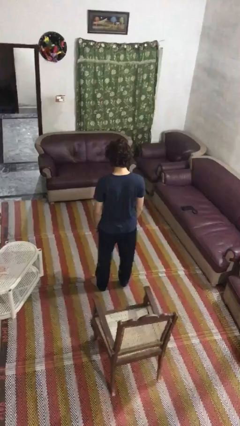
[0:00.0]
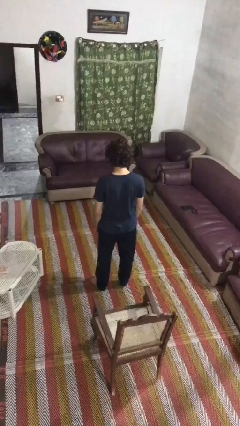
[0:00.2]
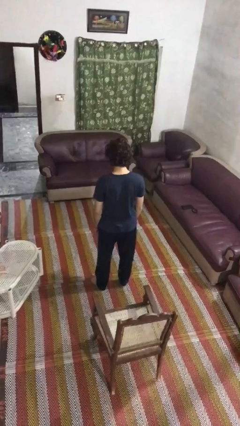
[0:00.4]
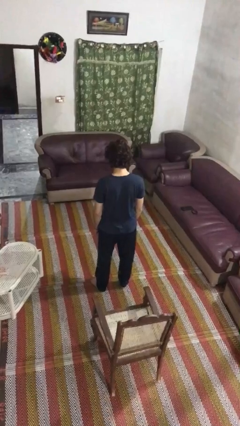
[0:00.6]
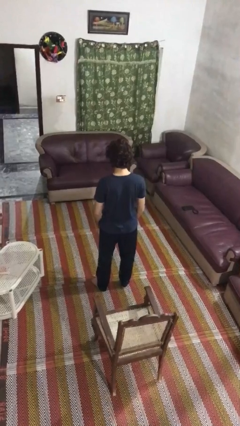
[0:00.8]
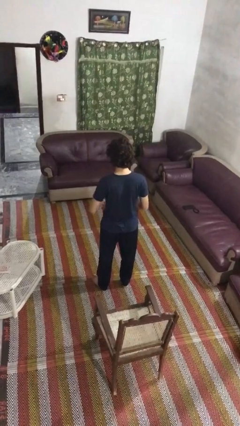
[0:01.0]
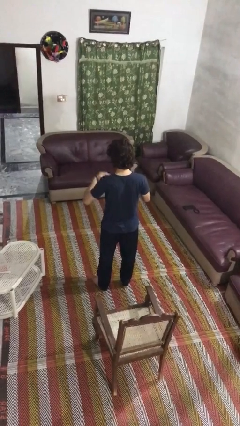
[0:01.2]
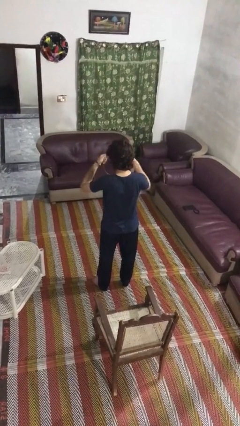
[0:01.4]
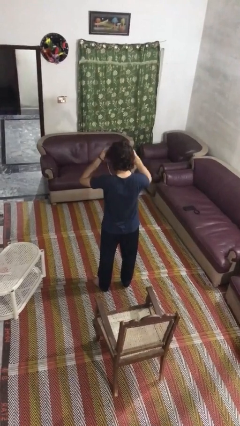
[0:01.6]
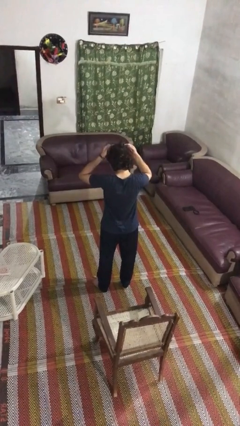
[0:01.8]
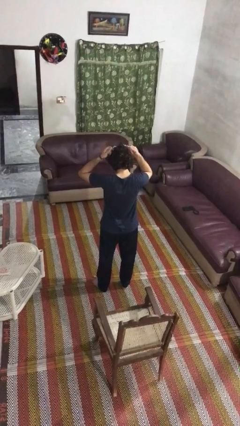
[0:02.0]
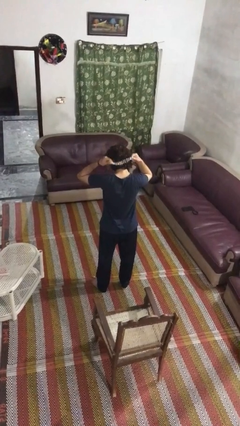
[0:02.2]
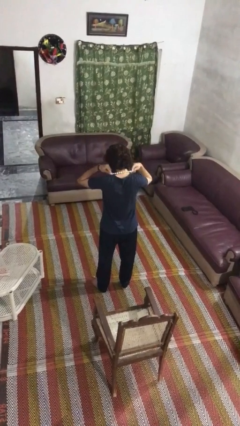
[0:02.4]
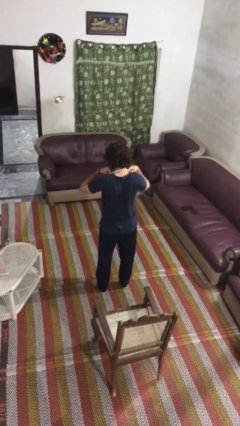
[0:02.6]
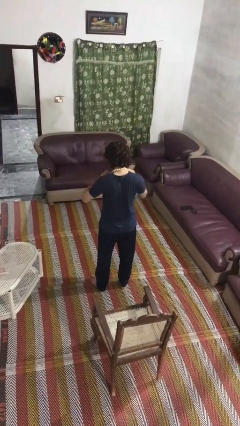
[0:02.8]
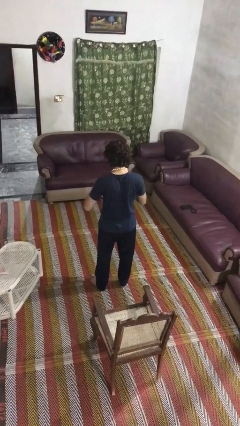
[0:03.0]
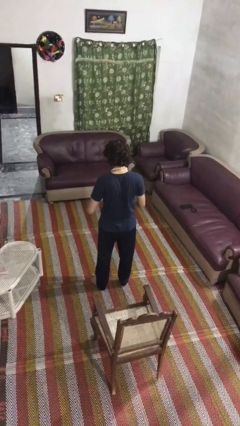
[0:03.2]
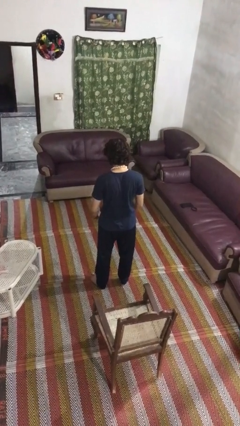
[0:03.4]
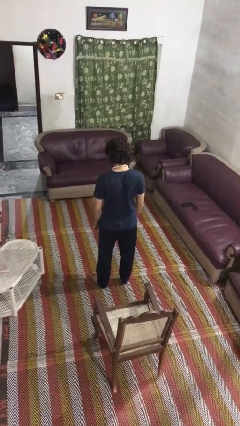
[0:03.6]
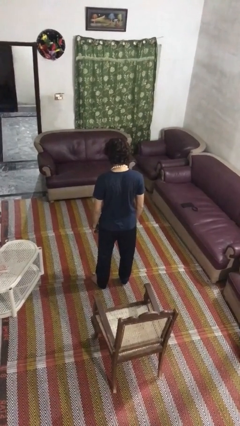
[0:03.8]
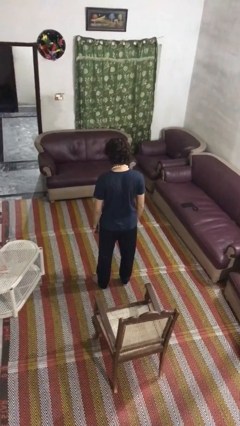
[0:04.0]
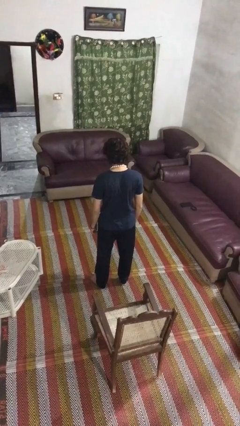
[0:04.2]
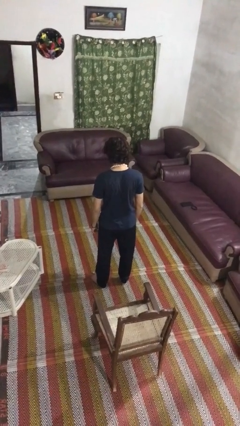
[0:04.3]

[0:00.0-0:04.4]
person puts on necklace

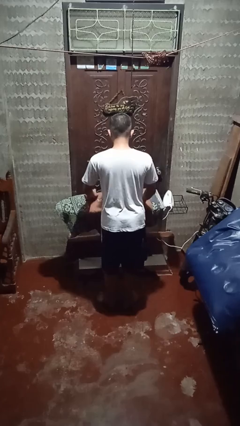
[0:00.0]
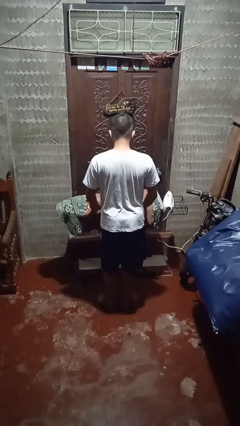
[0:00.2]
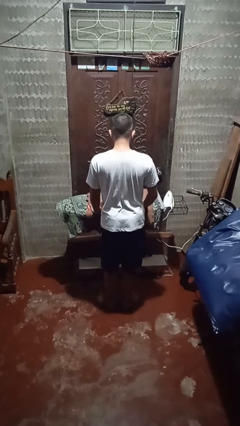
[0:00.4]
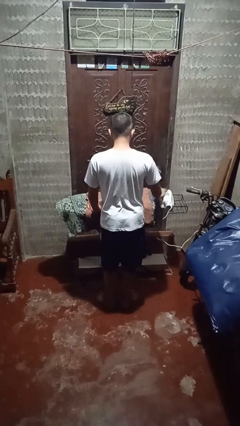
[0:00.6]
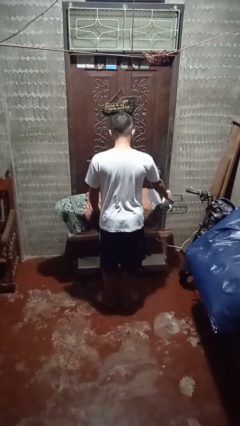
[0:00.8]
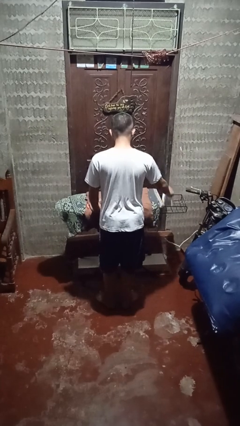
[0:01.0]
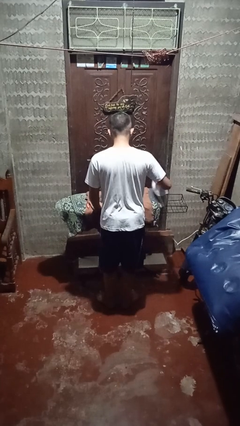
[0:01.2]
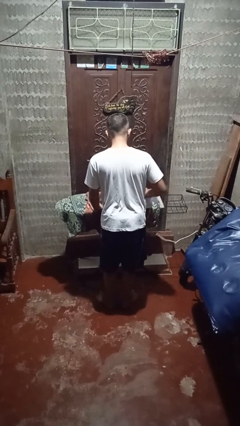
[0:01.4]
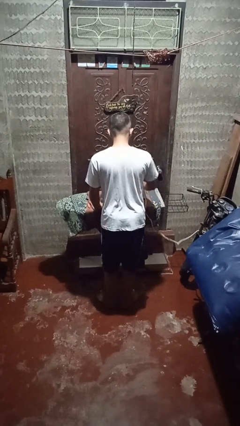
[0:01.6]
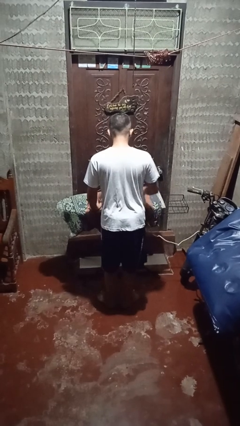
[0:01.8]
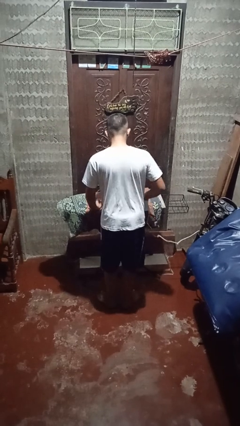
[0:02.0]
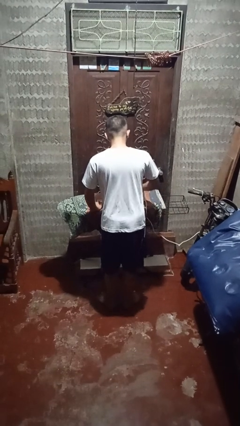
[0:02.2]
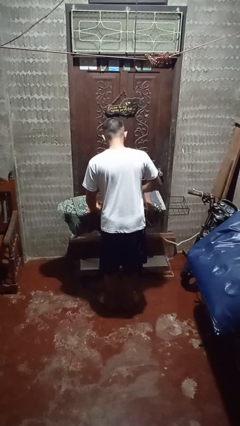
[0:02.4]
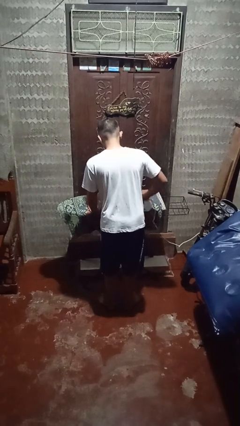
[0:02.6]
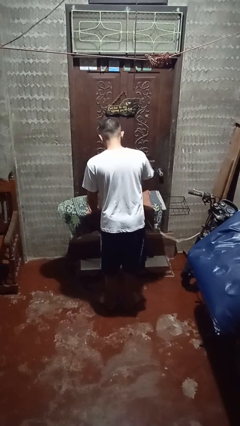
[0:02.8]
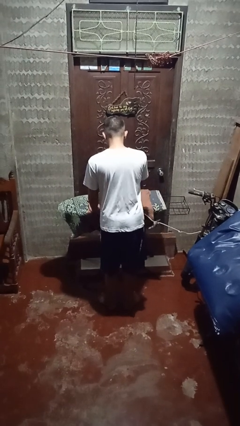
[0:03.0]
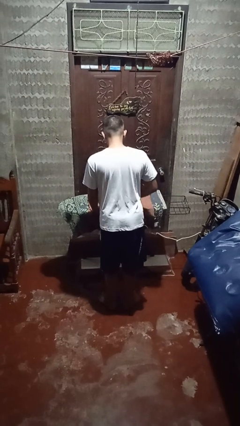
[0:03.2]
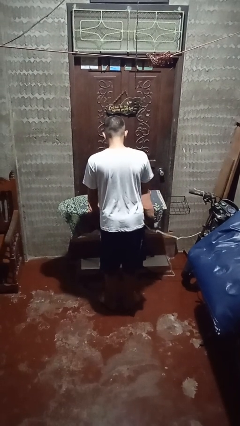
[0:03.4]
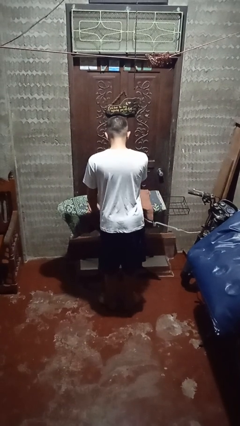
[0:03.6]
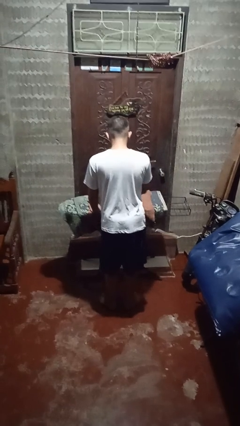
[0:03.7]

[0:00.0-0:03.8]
person irons clothes

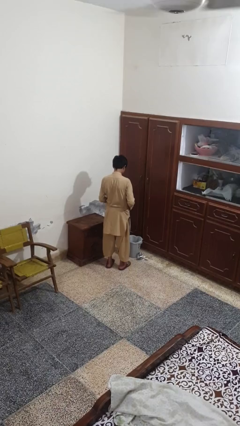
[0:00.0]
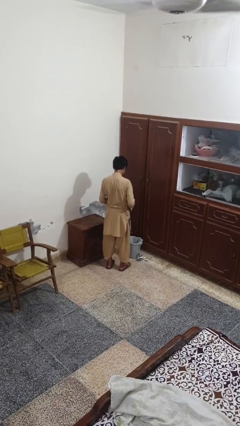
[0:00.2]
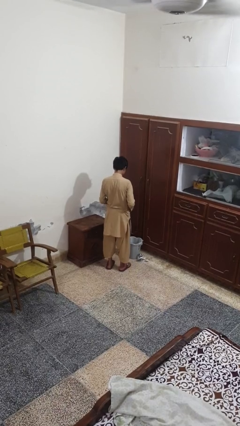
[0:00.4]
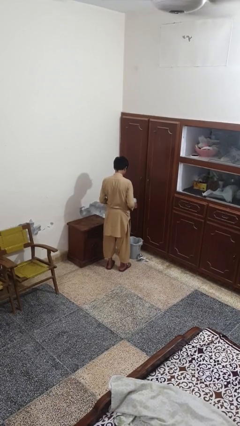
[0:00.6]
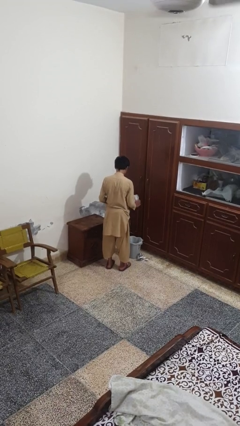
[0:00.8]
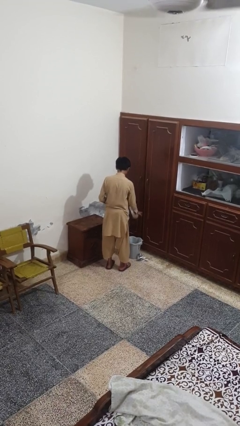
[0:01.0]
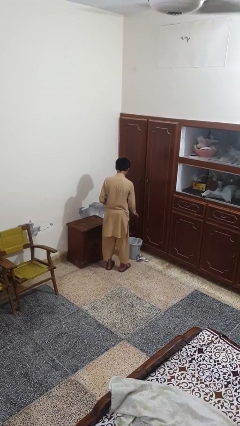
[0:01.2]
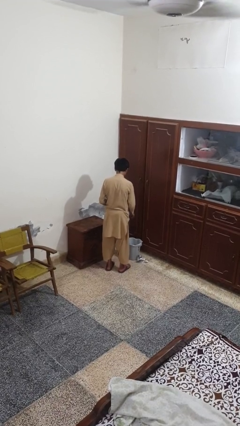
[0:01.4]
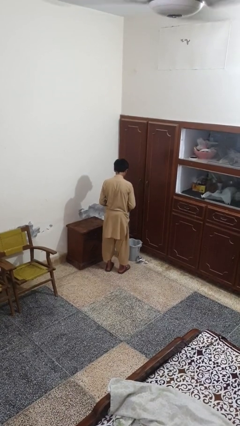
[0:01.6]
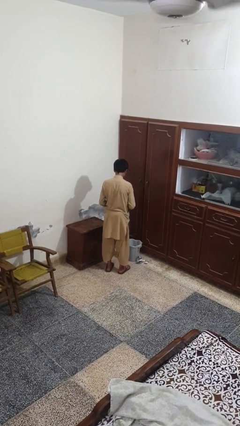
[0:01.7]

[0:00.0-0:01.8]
person discards trash

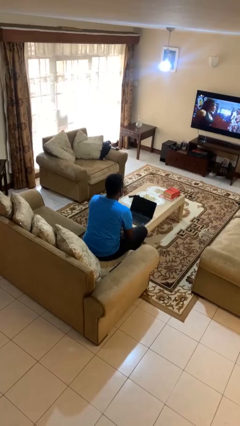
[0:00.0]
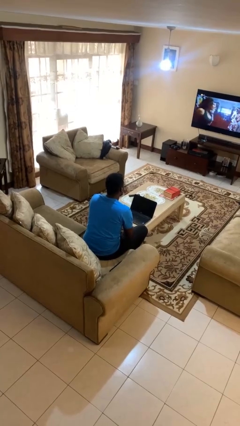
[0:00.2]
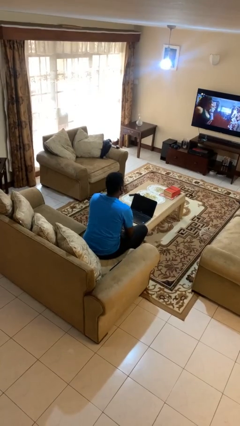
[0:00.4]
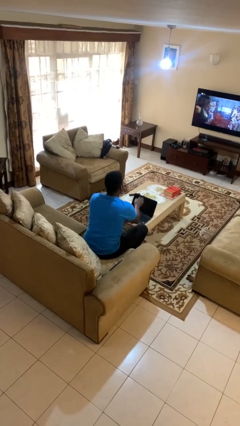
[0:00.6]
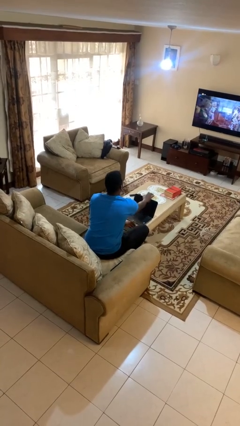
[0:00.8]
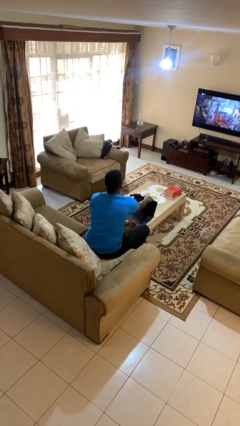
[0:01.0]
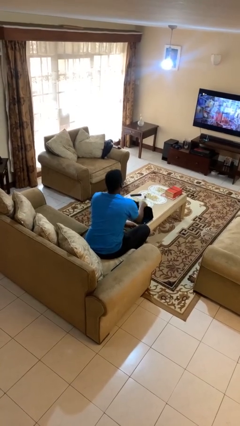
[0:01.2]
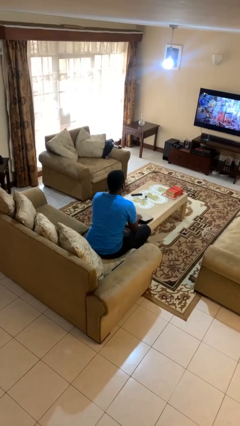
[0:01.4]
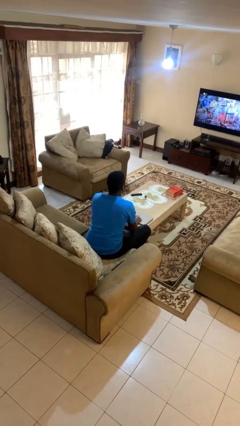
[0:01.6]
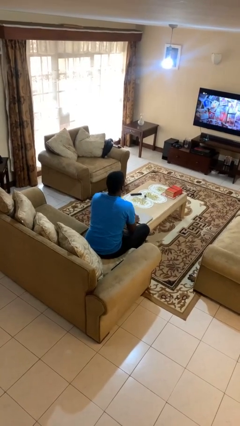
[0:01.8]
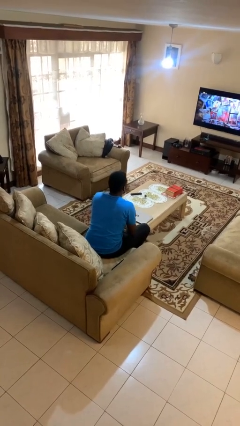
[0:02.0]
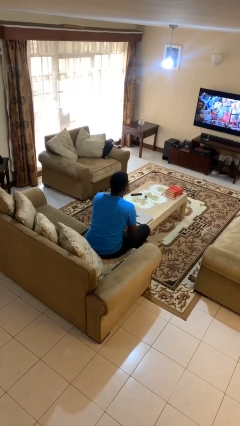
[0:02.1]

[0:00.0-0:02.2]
person closes laptop

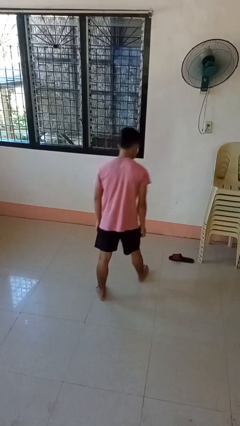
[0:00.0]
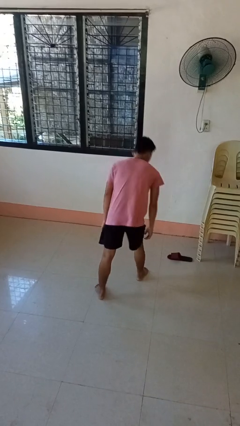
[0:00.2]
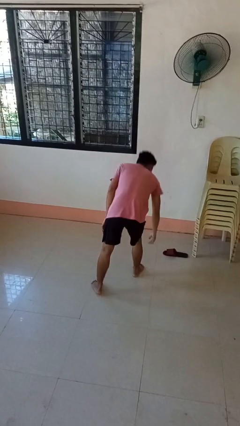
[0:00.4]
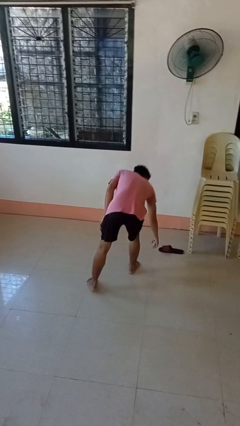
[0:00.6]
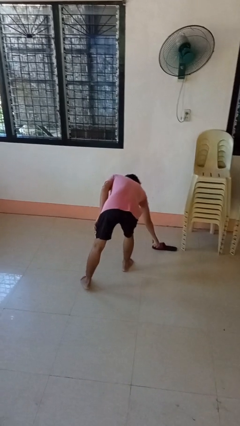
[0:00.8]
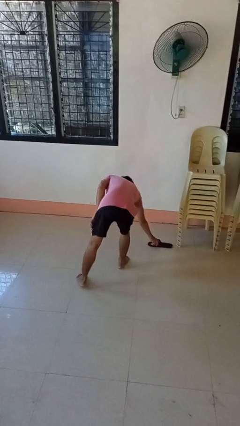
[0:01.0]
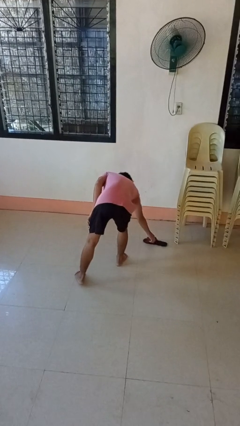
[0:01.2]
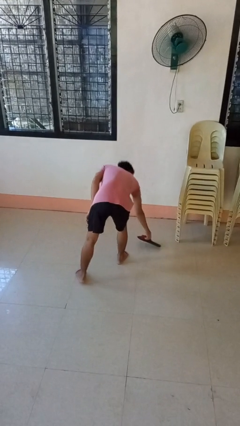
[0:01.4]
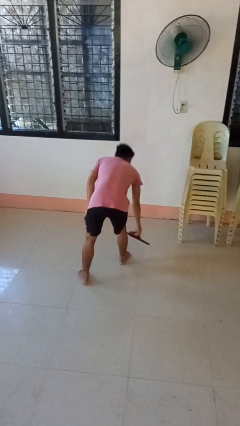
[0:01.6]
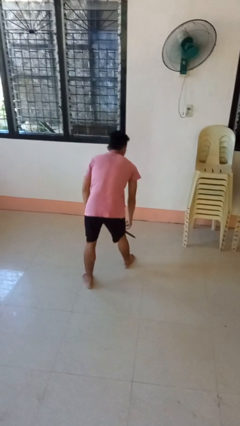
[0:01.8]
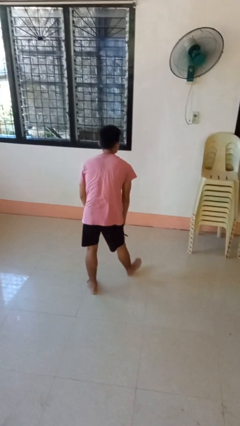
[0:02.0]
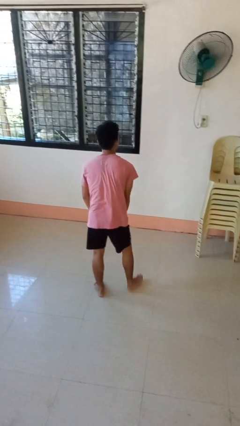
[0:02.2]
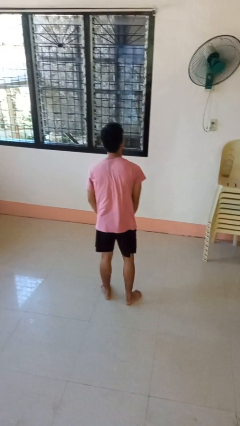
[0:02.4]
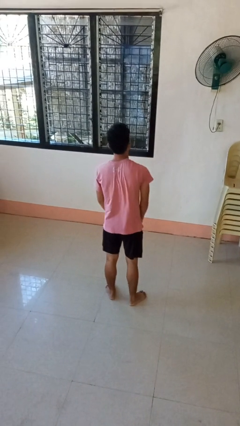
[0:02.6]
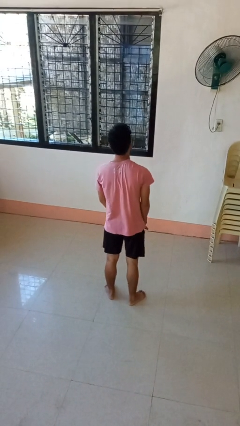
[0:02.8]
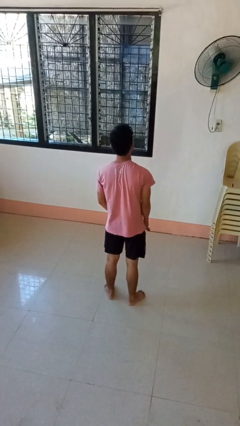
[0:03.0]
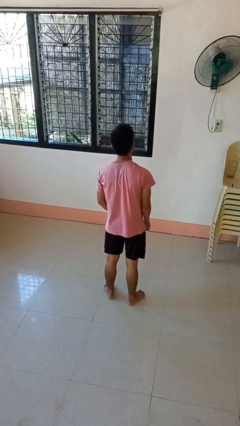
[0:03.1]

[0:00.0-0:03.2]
person picks up object from floor

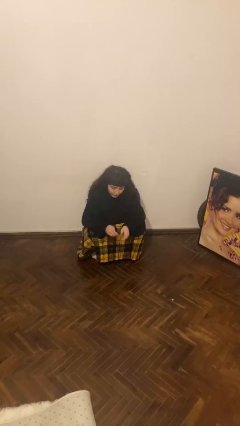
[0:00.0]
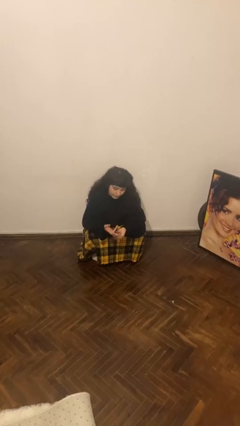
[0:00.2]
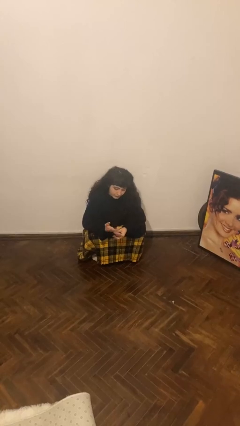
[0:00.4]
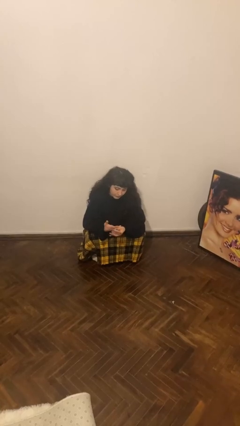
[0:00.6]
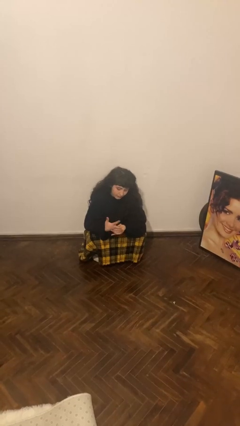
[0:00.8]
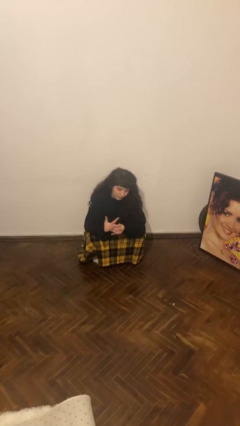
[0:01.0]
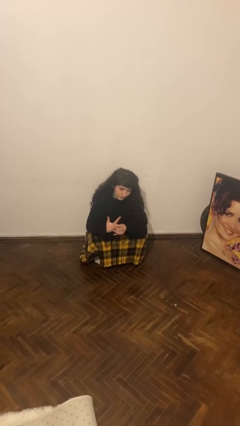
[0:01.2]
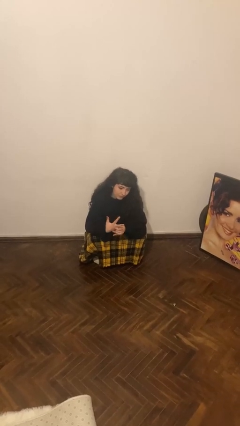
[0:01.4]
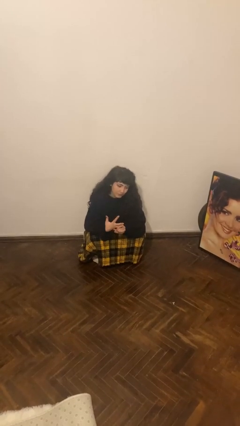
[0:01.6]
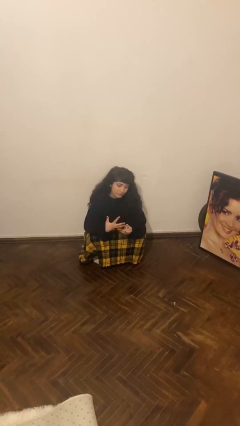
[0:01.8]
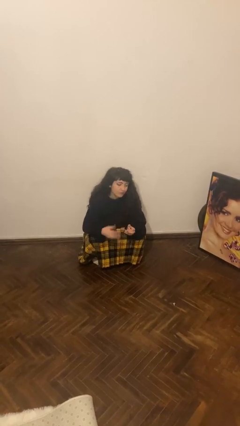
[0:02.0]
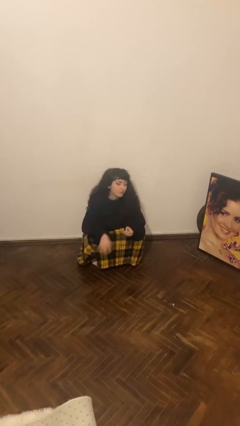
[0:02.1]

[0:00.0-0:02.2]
person takes off ring
